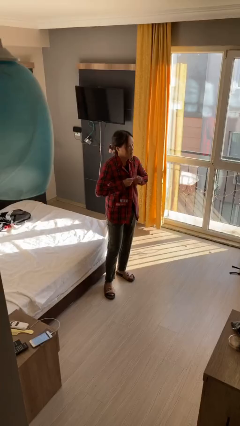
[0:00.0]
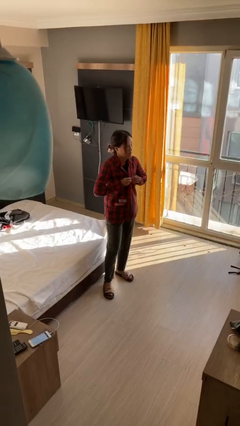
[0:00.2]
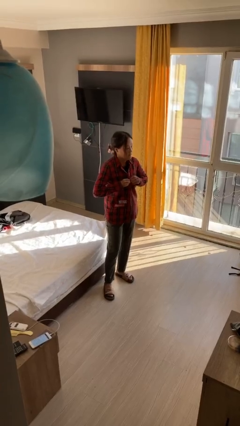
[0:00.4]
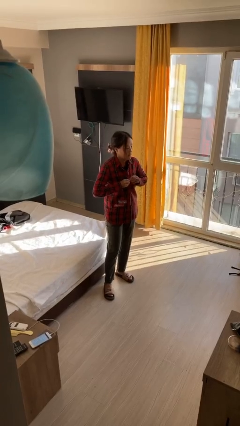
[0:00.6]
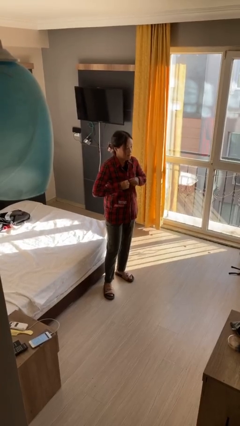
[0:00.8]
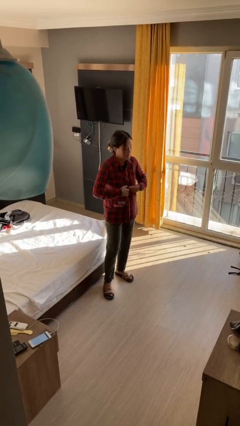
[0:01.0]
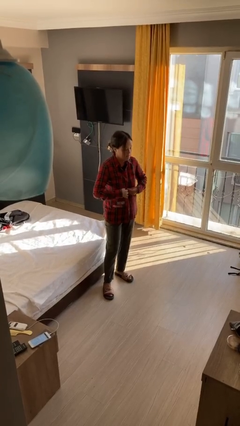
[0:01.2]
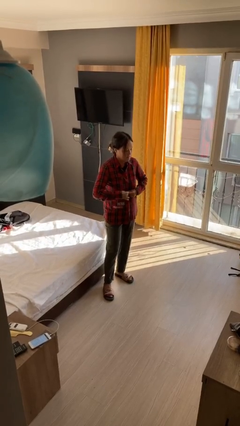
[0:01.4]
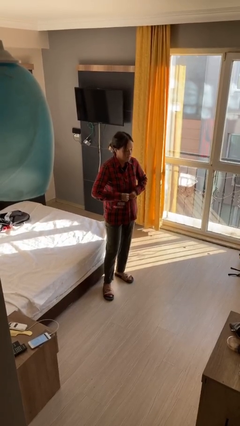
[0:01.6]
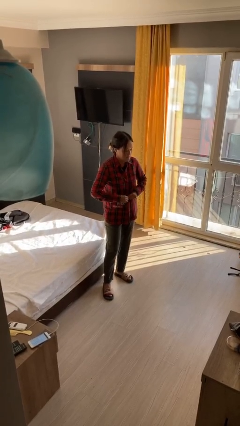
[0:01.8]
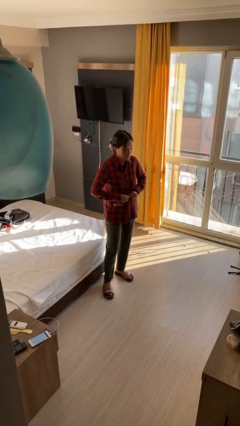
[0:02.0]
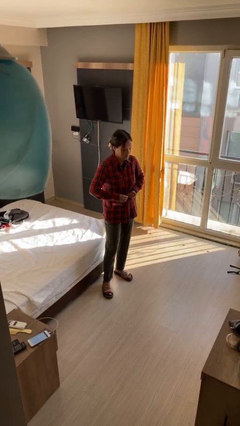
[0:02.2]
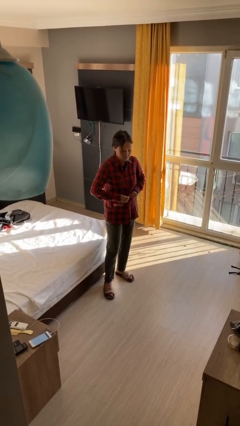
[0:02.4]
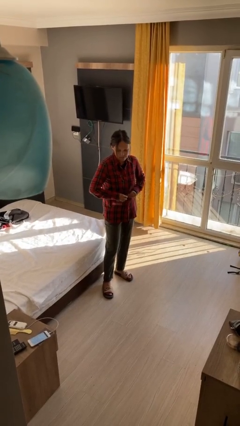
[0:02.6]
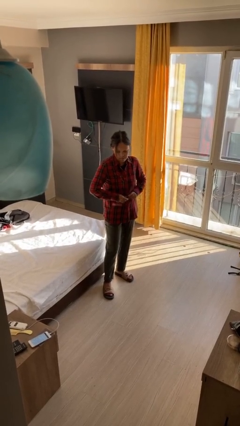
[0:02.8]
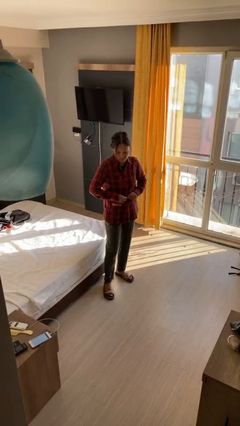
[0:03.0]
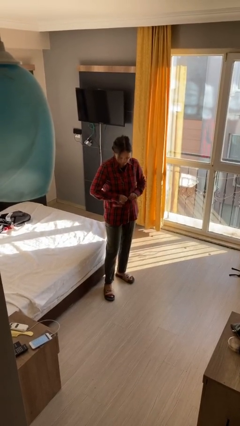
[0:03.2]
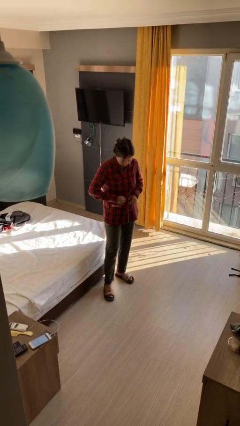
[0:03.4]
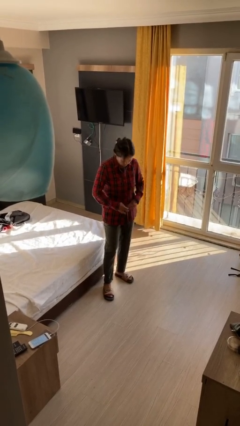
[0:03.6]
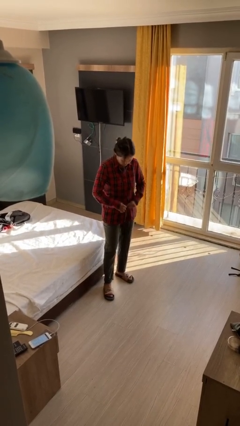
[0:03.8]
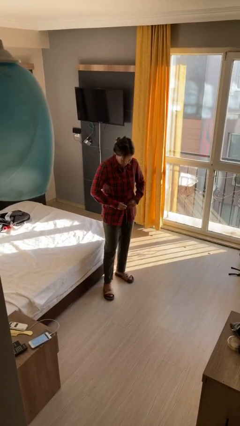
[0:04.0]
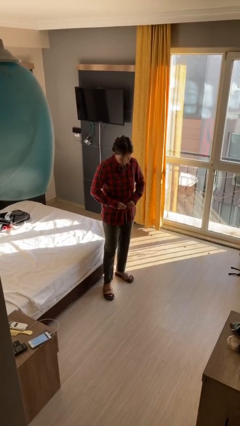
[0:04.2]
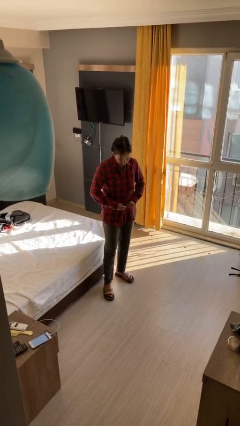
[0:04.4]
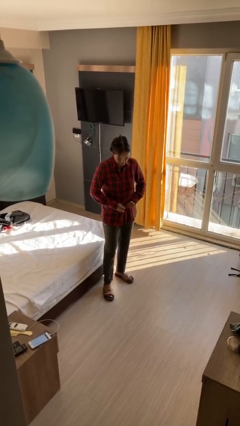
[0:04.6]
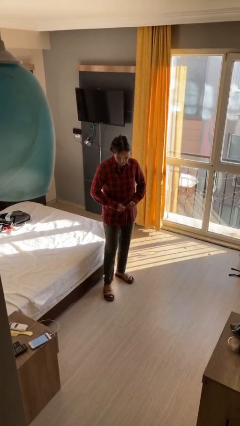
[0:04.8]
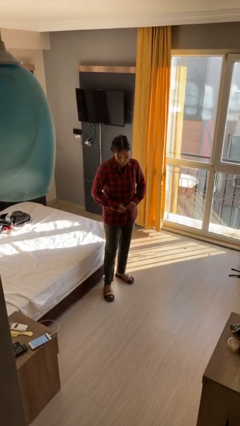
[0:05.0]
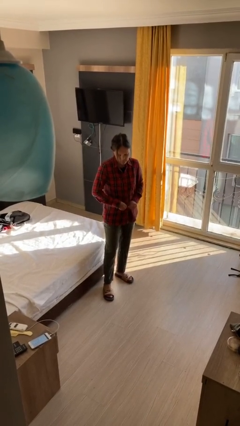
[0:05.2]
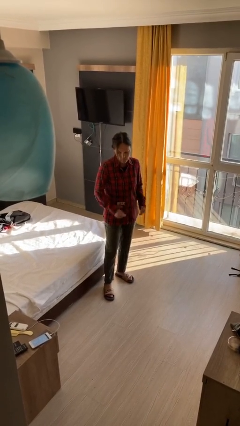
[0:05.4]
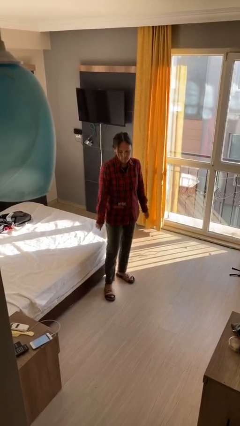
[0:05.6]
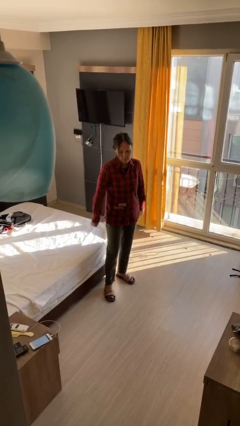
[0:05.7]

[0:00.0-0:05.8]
person buttons shirt

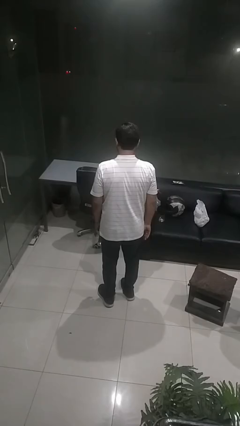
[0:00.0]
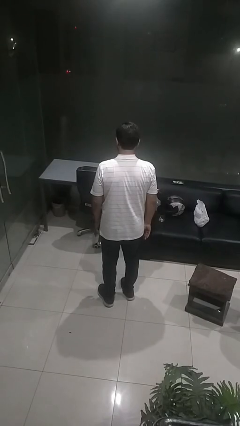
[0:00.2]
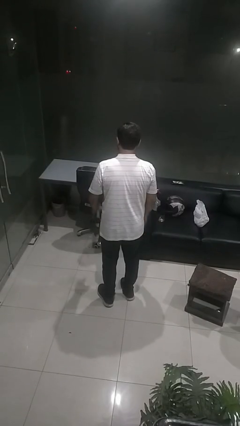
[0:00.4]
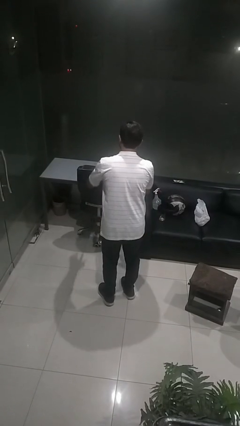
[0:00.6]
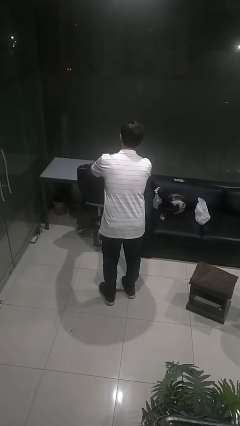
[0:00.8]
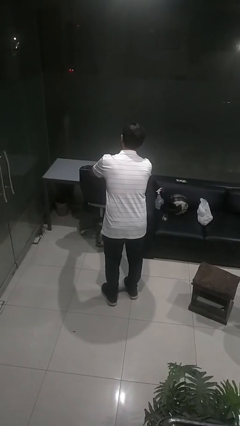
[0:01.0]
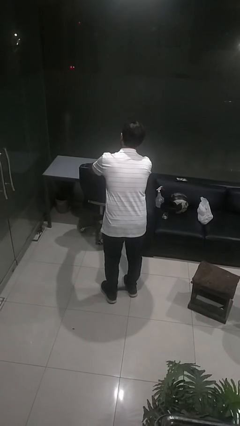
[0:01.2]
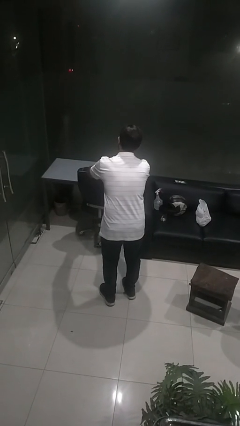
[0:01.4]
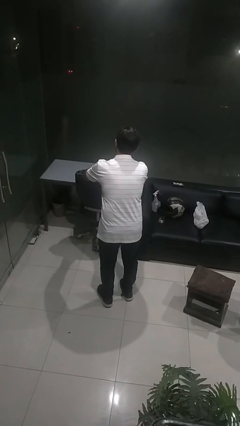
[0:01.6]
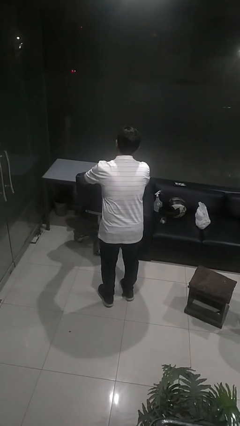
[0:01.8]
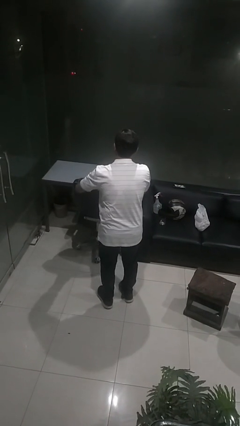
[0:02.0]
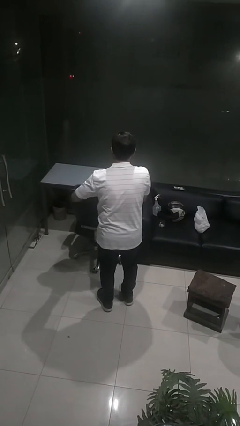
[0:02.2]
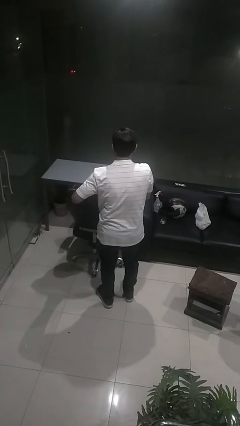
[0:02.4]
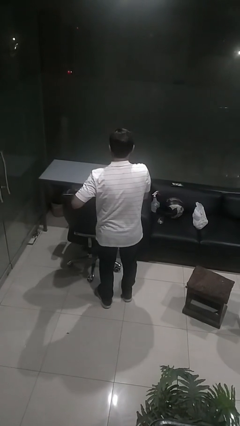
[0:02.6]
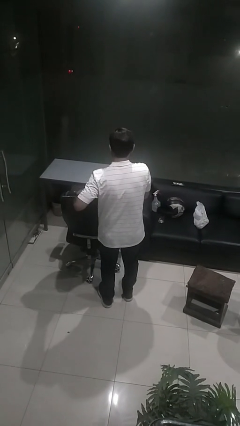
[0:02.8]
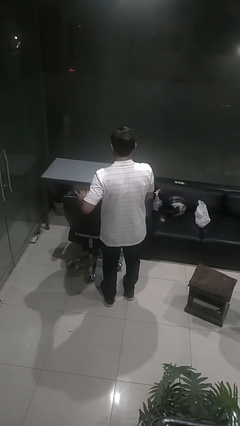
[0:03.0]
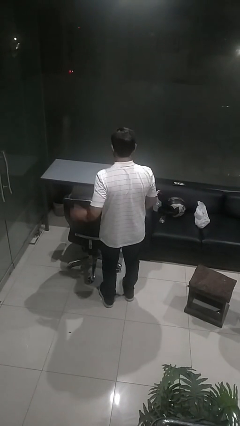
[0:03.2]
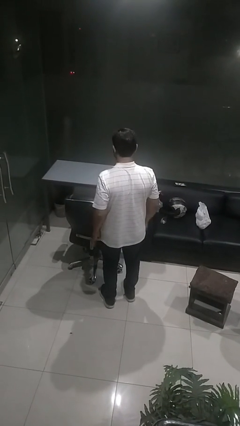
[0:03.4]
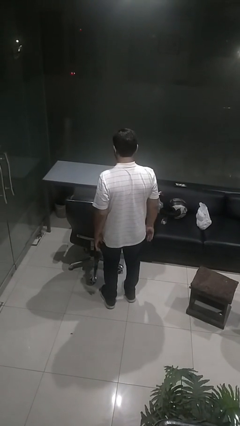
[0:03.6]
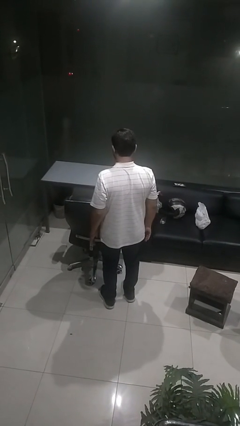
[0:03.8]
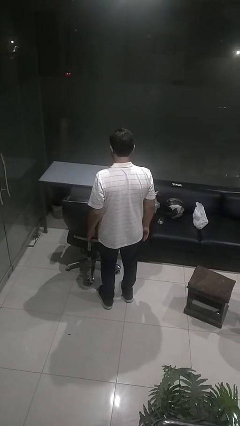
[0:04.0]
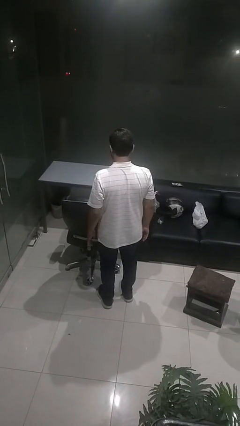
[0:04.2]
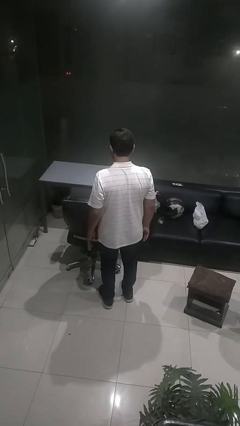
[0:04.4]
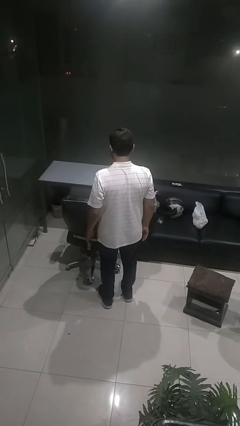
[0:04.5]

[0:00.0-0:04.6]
person pulls out chair

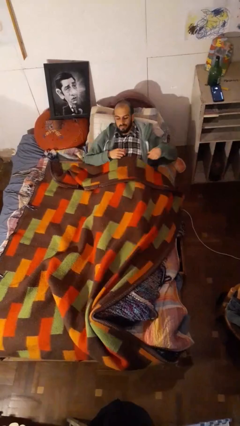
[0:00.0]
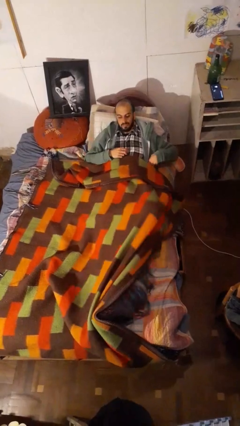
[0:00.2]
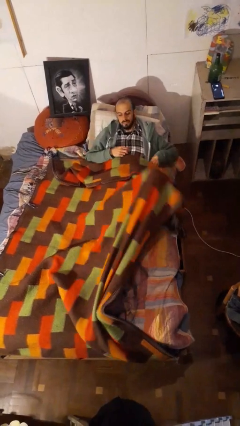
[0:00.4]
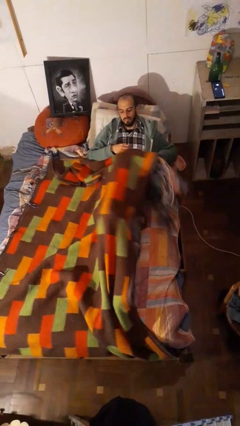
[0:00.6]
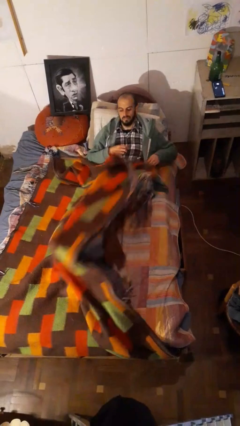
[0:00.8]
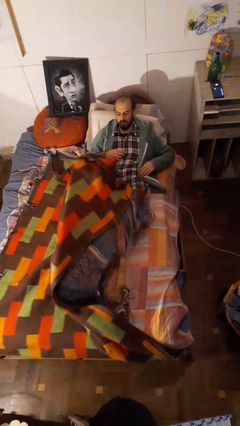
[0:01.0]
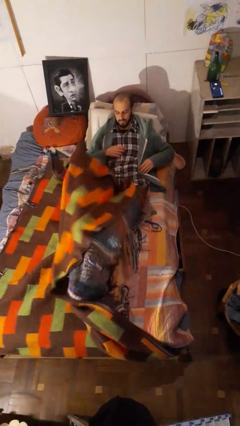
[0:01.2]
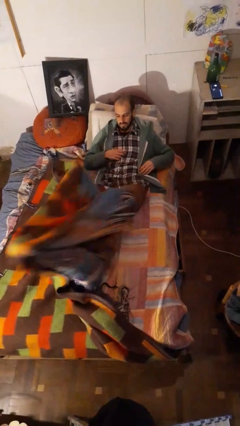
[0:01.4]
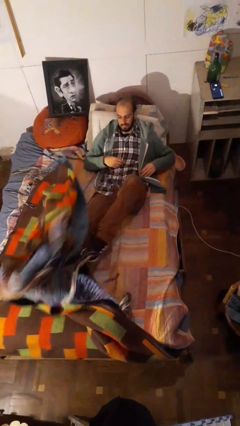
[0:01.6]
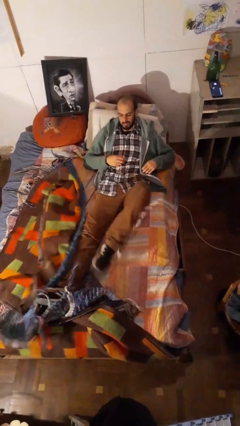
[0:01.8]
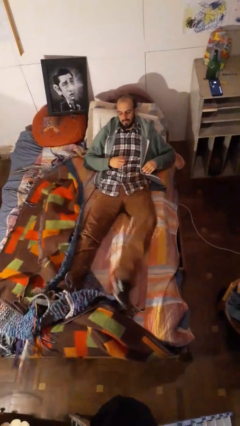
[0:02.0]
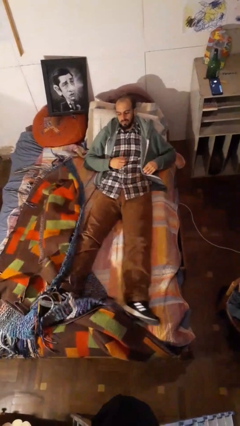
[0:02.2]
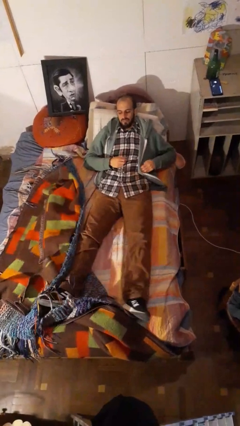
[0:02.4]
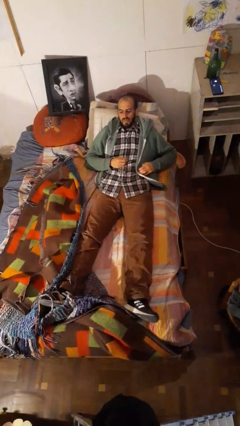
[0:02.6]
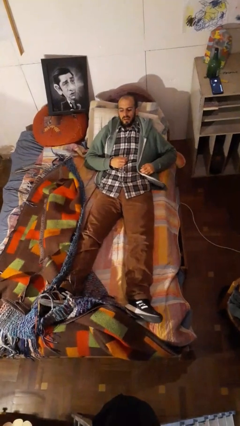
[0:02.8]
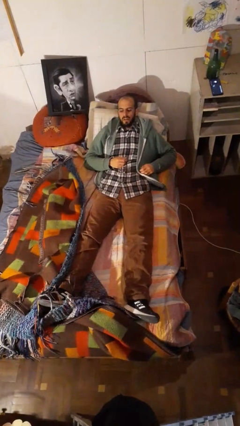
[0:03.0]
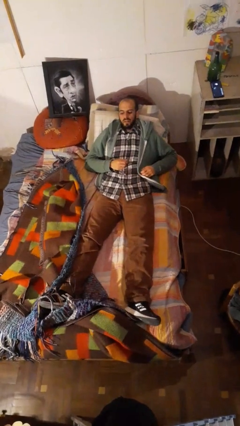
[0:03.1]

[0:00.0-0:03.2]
person uncovers with bedsheets

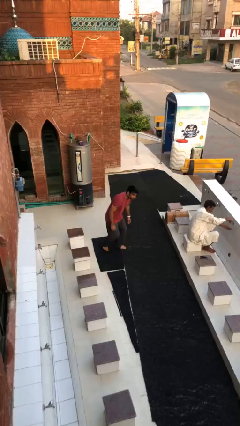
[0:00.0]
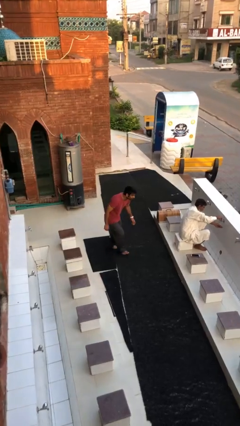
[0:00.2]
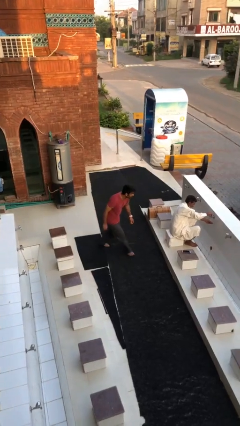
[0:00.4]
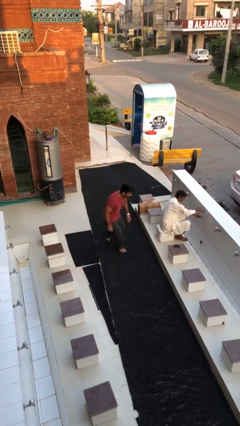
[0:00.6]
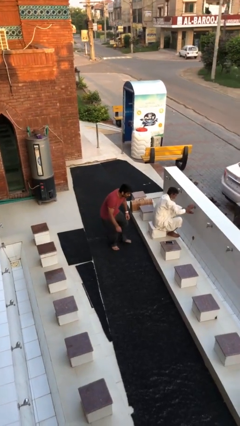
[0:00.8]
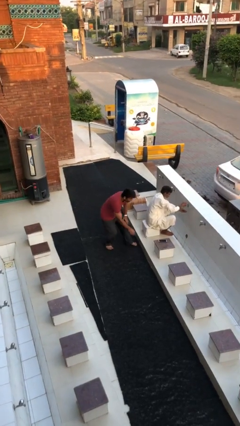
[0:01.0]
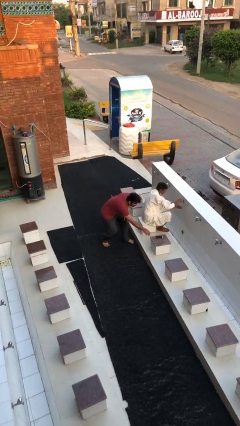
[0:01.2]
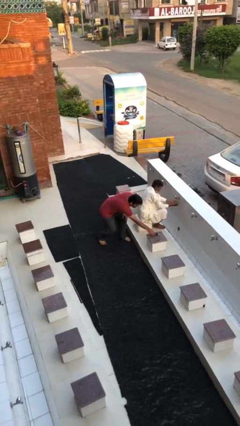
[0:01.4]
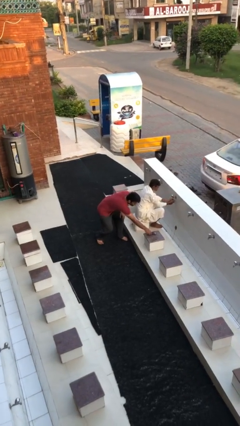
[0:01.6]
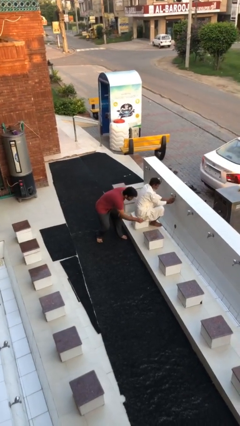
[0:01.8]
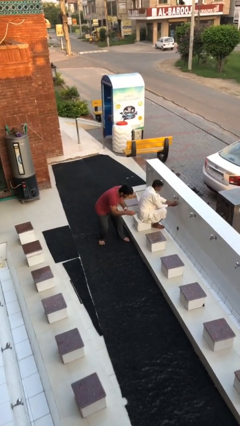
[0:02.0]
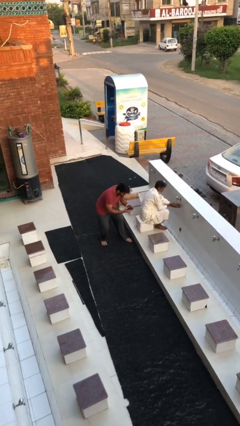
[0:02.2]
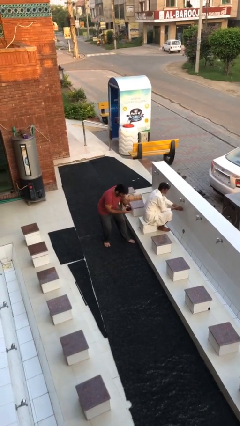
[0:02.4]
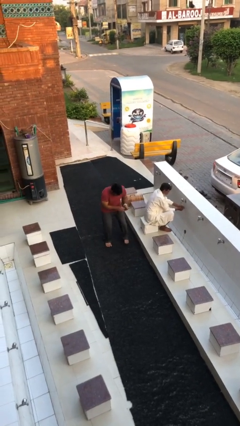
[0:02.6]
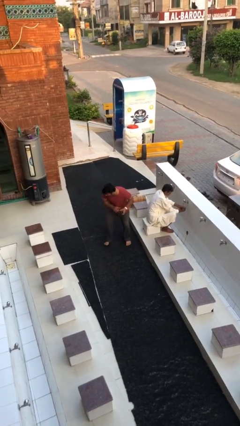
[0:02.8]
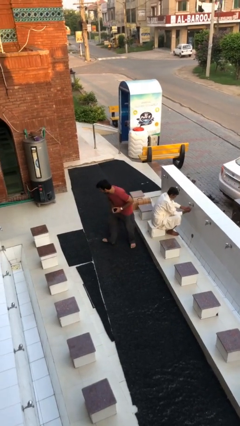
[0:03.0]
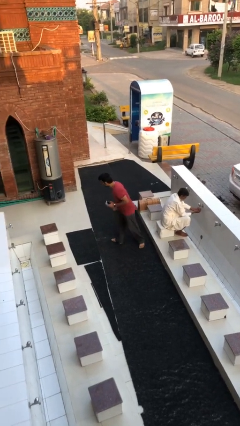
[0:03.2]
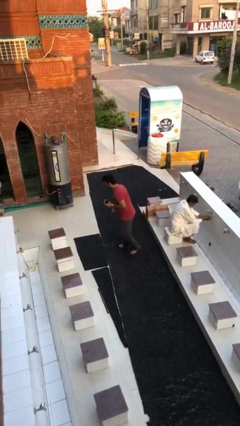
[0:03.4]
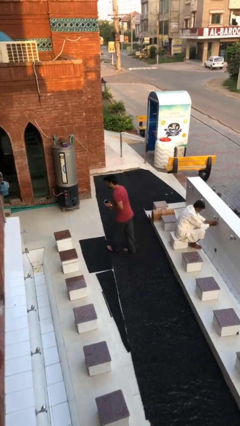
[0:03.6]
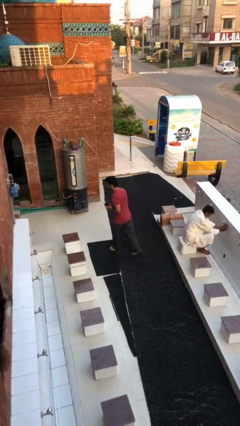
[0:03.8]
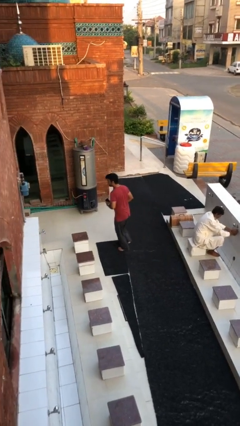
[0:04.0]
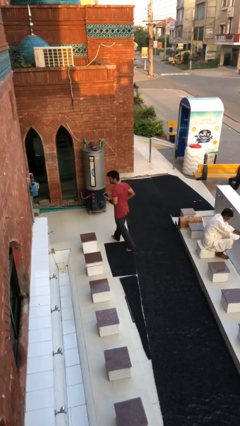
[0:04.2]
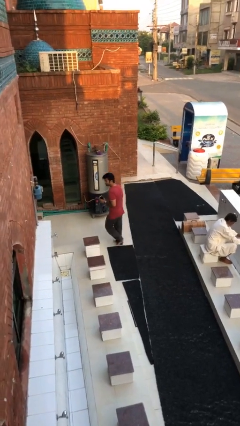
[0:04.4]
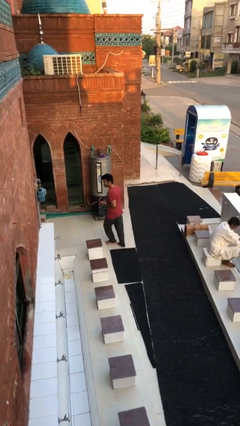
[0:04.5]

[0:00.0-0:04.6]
person steals object from person
